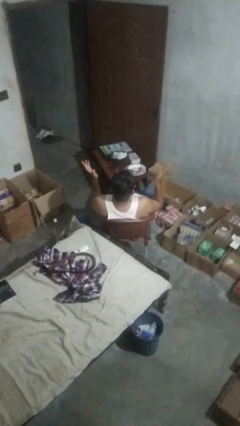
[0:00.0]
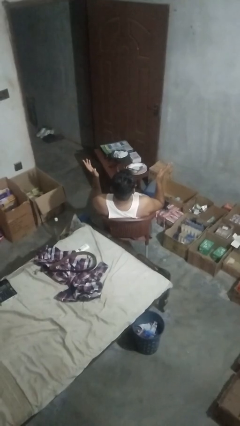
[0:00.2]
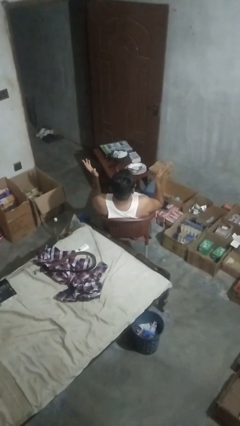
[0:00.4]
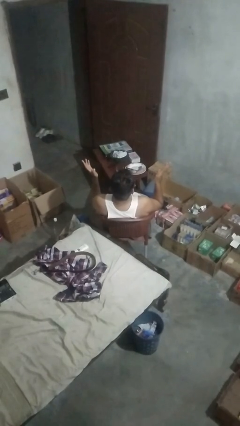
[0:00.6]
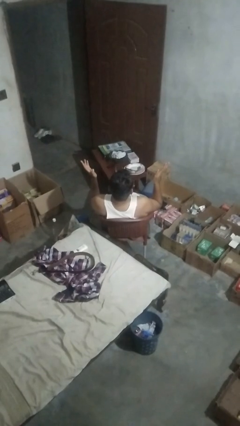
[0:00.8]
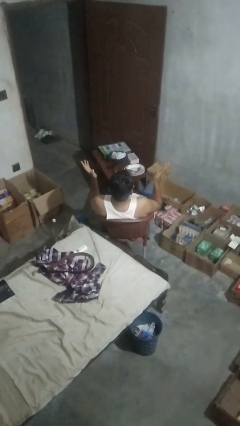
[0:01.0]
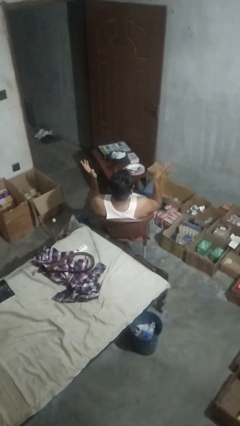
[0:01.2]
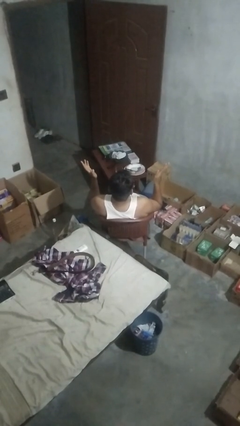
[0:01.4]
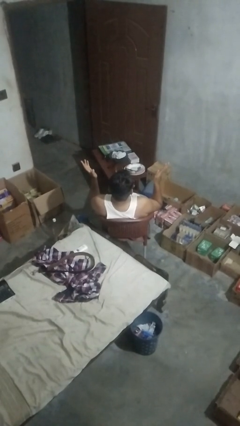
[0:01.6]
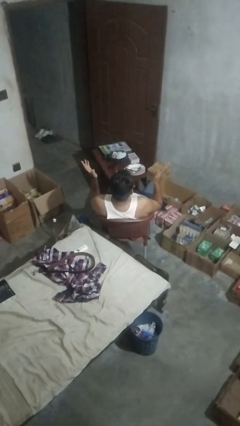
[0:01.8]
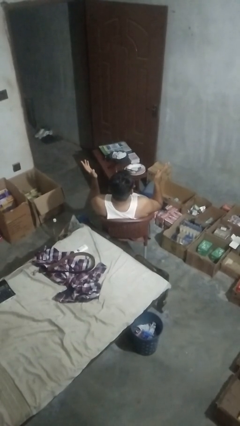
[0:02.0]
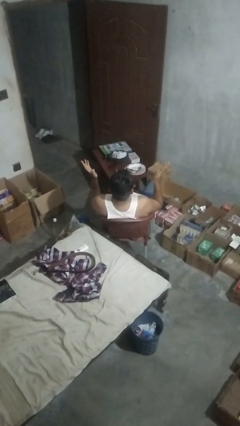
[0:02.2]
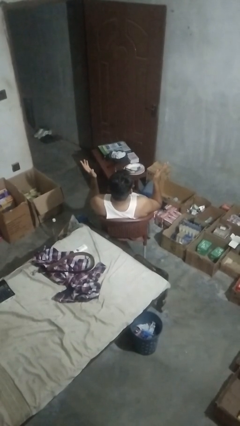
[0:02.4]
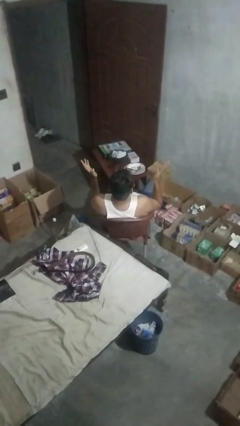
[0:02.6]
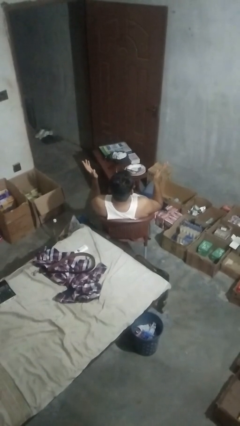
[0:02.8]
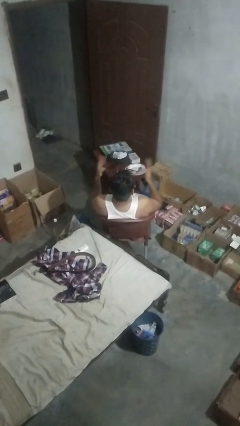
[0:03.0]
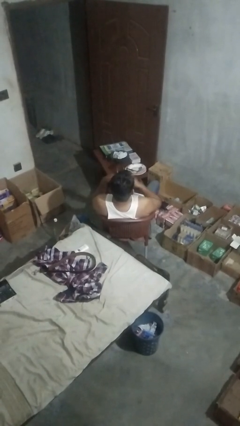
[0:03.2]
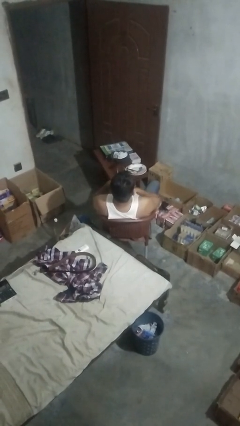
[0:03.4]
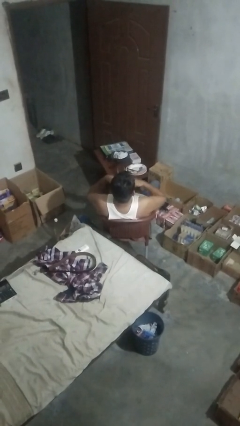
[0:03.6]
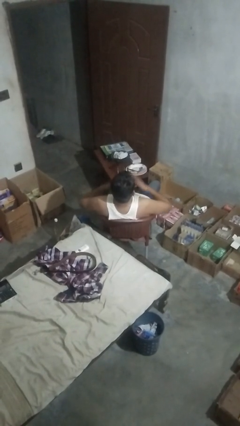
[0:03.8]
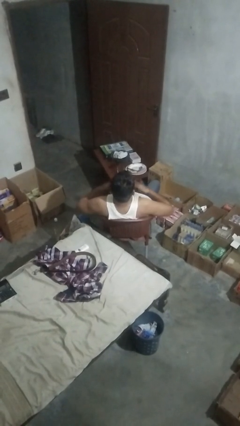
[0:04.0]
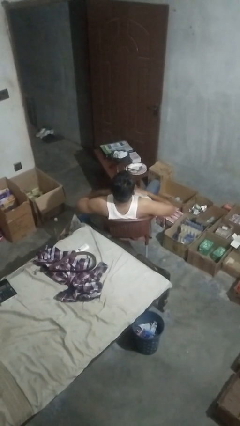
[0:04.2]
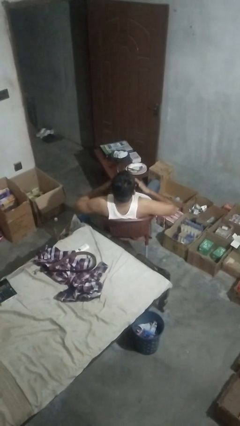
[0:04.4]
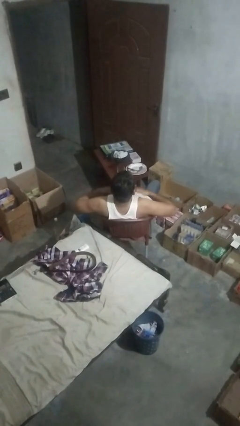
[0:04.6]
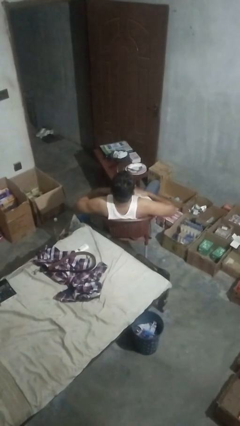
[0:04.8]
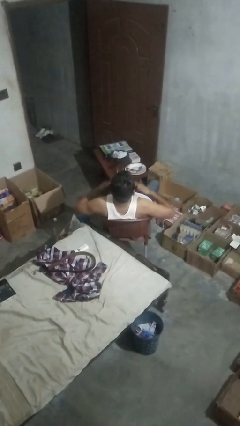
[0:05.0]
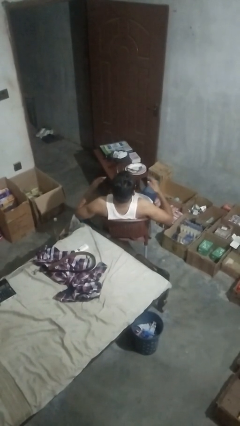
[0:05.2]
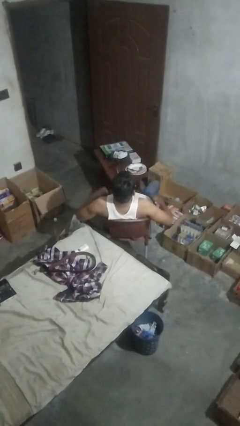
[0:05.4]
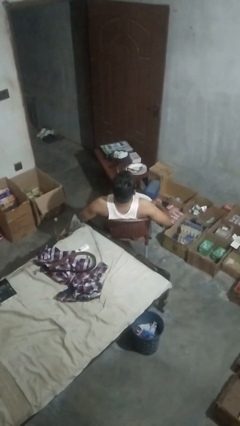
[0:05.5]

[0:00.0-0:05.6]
person drums on chest

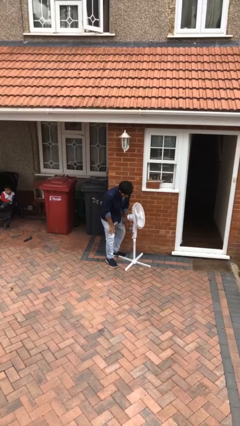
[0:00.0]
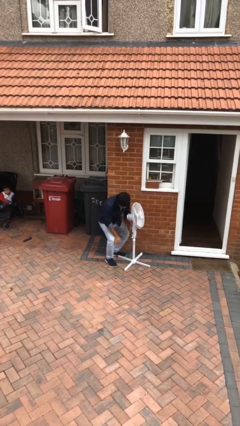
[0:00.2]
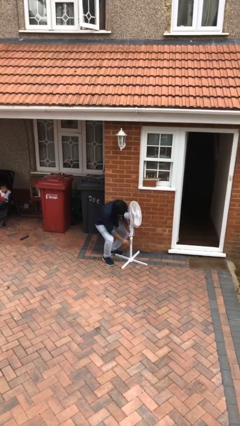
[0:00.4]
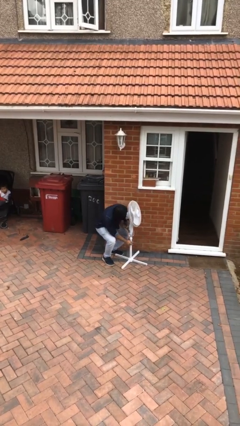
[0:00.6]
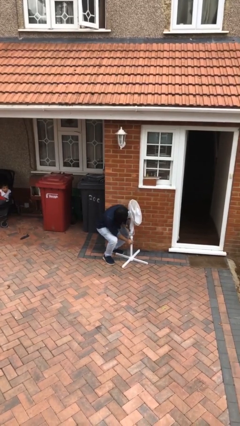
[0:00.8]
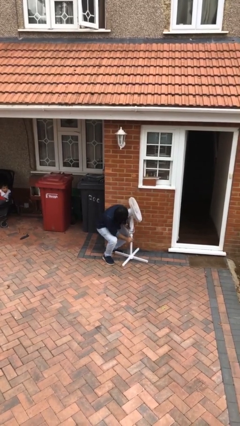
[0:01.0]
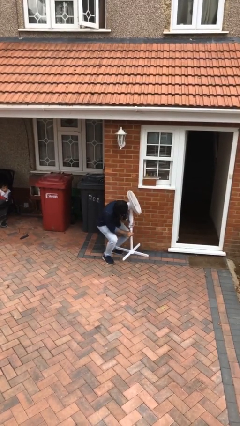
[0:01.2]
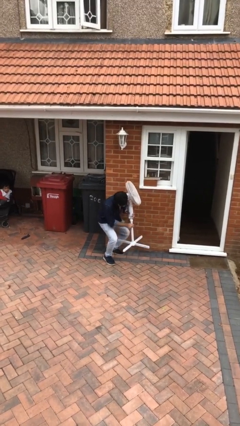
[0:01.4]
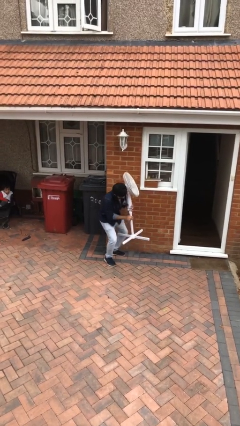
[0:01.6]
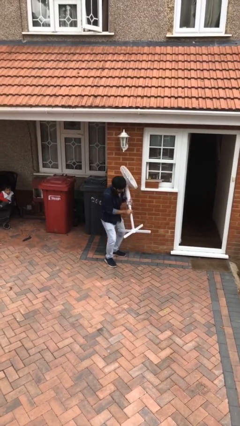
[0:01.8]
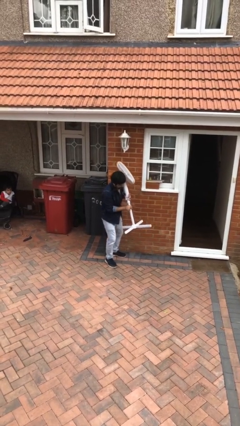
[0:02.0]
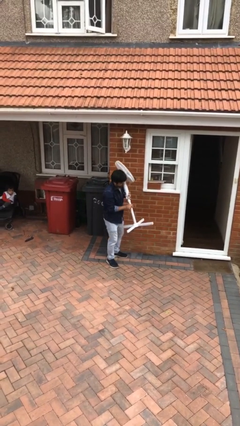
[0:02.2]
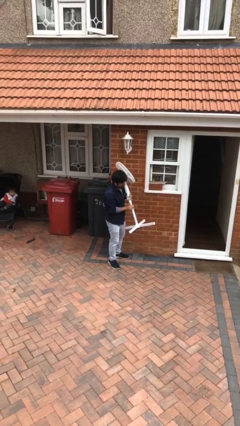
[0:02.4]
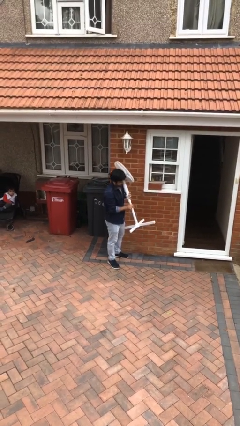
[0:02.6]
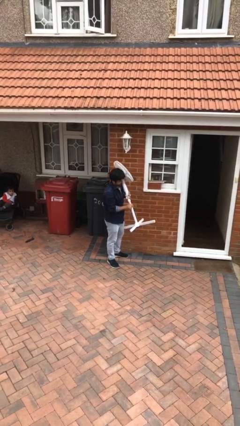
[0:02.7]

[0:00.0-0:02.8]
person picks up object from floor

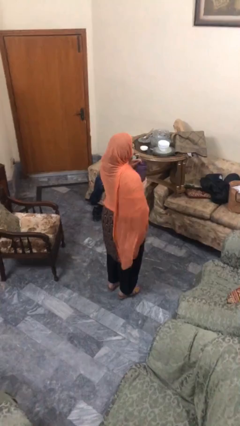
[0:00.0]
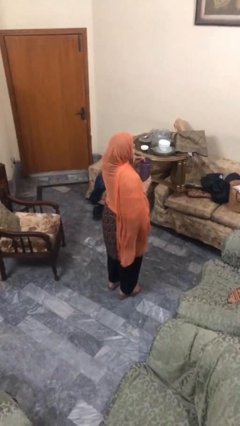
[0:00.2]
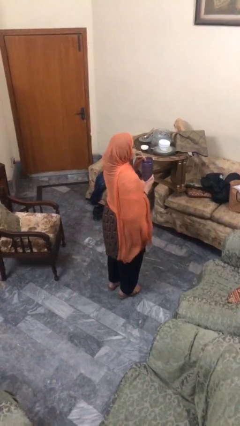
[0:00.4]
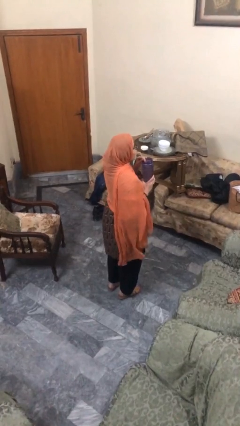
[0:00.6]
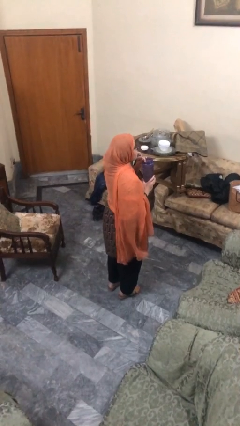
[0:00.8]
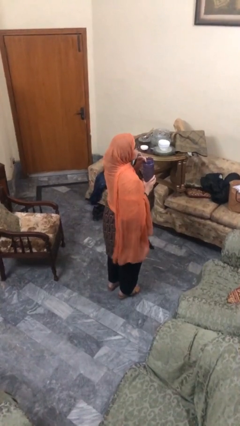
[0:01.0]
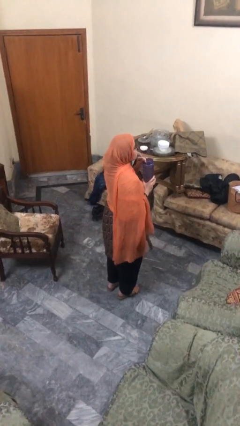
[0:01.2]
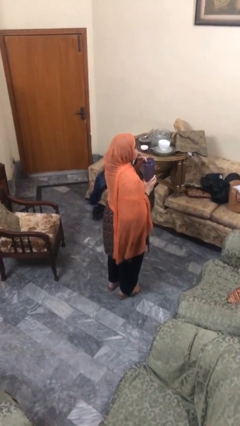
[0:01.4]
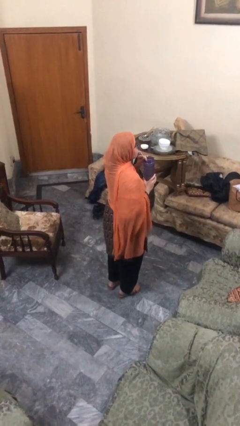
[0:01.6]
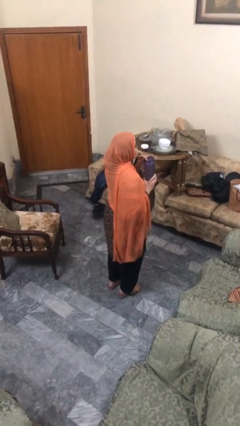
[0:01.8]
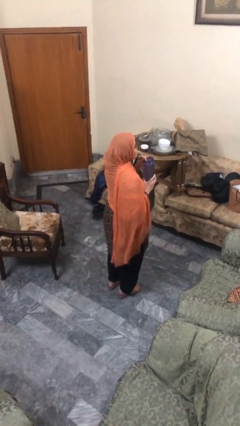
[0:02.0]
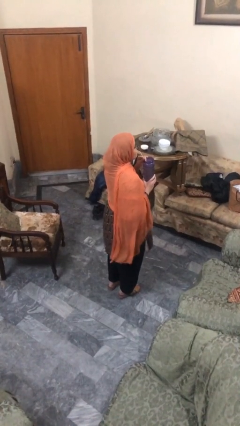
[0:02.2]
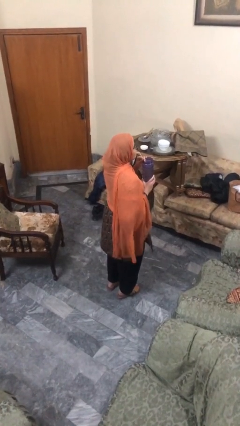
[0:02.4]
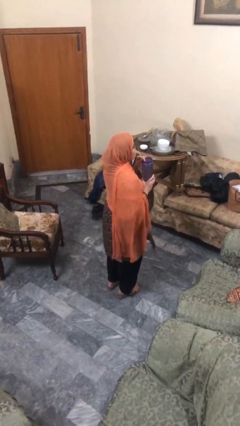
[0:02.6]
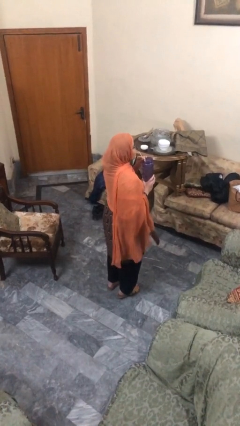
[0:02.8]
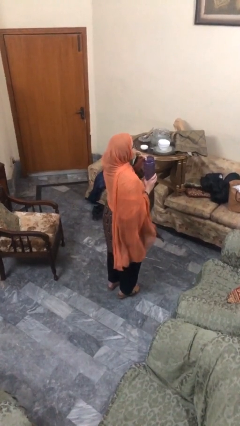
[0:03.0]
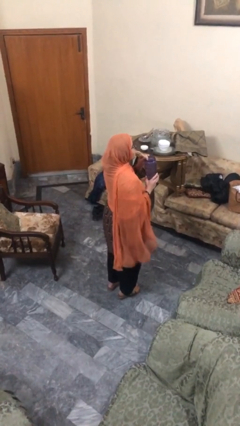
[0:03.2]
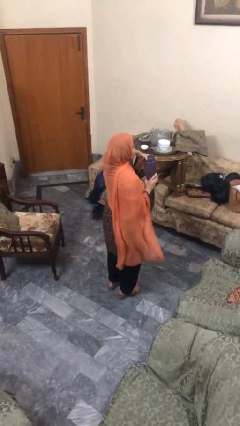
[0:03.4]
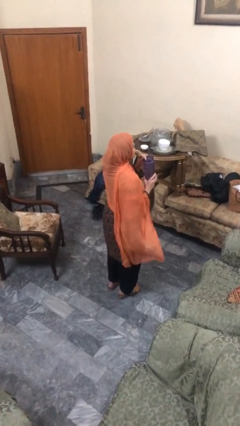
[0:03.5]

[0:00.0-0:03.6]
person drinks from straw

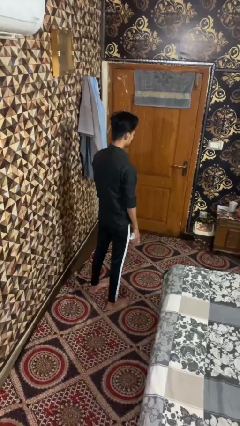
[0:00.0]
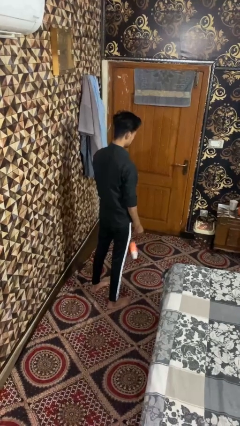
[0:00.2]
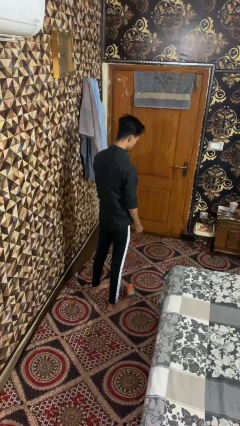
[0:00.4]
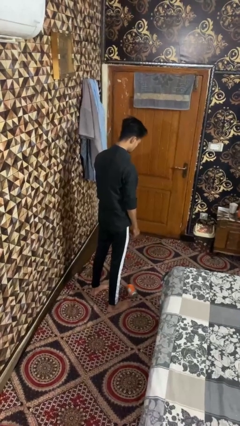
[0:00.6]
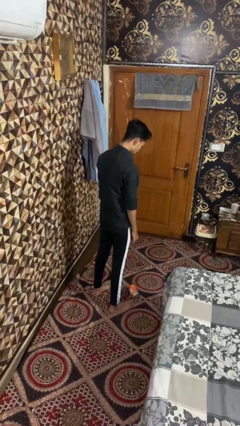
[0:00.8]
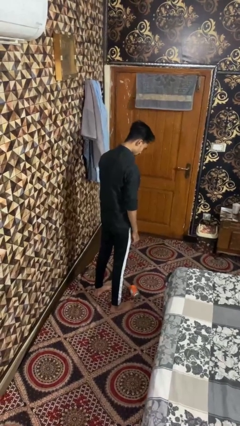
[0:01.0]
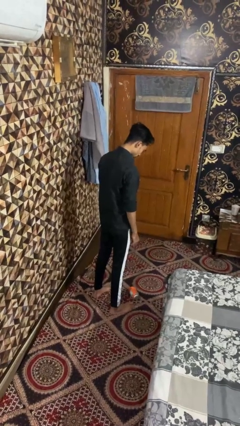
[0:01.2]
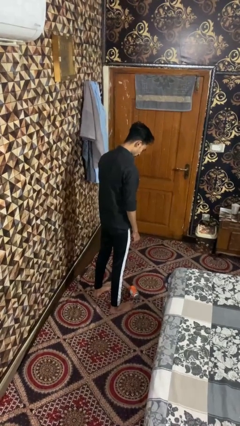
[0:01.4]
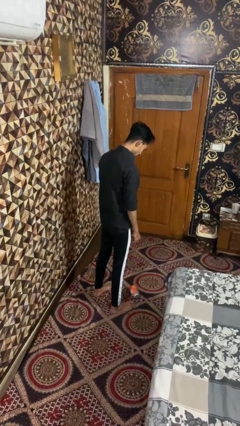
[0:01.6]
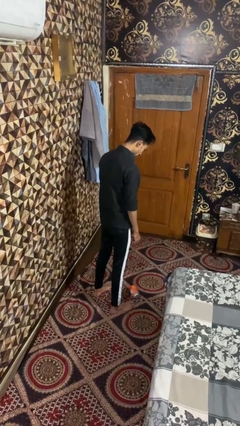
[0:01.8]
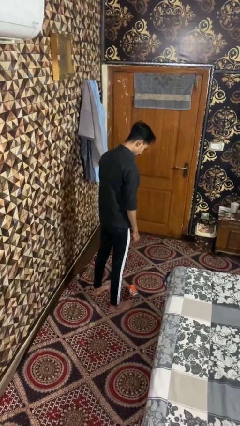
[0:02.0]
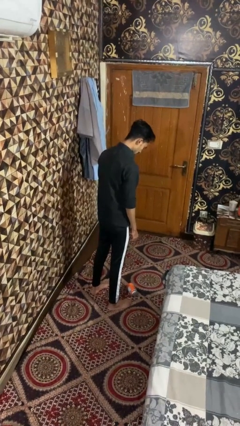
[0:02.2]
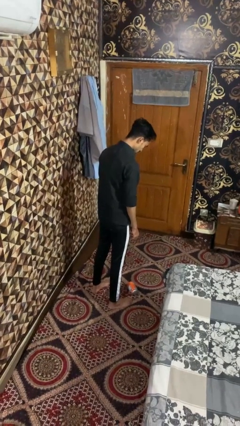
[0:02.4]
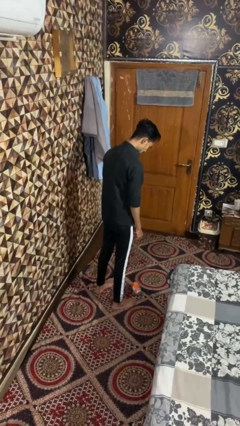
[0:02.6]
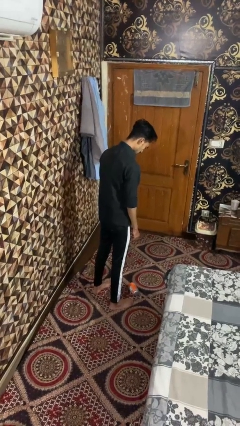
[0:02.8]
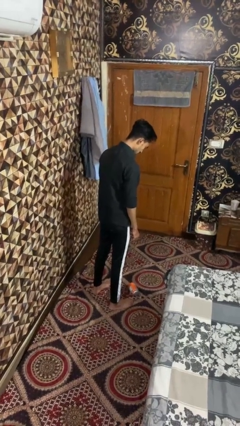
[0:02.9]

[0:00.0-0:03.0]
person trips on object on floor

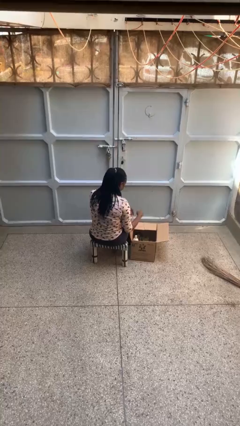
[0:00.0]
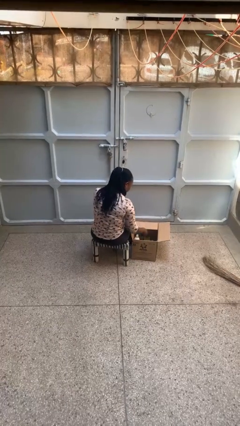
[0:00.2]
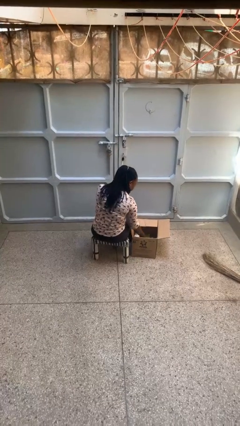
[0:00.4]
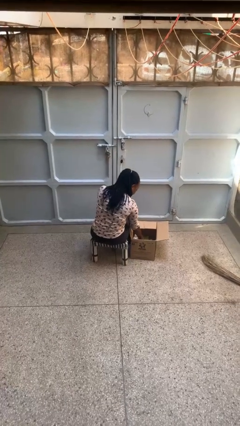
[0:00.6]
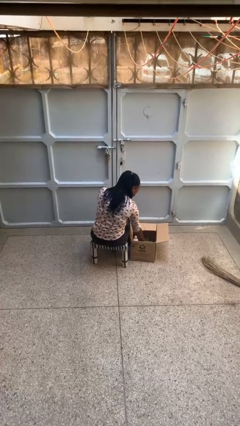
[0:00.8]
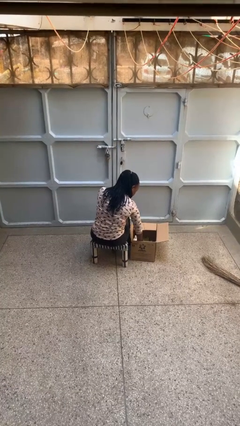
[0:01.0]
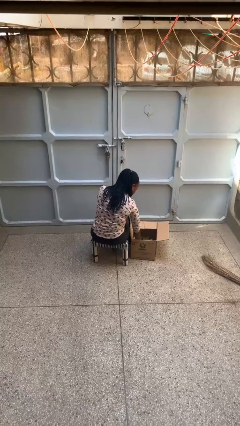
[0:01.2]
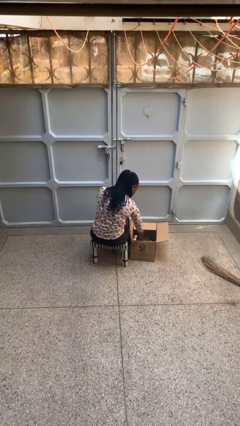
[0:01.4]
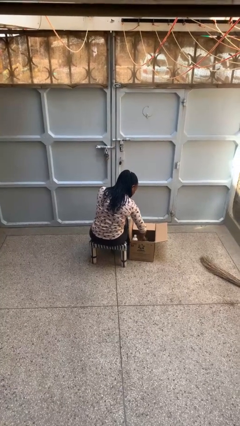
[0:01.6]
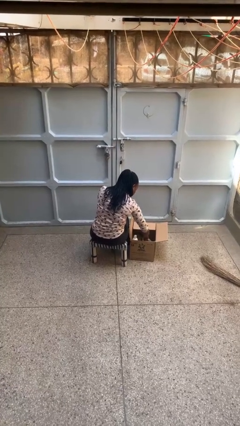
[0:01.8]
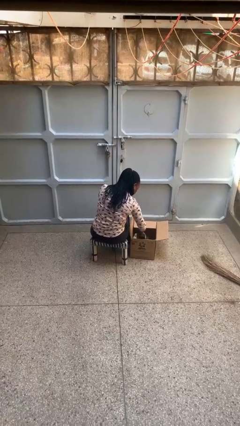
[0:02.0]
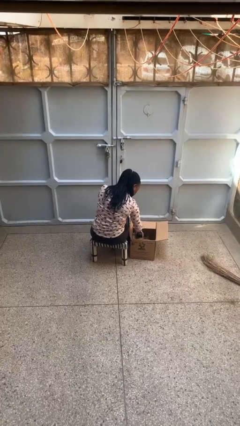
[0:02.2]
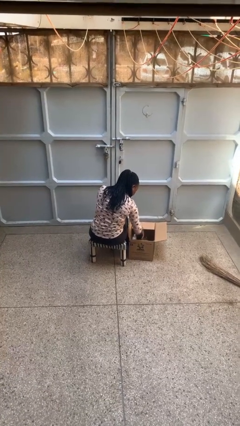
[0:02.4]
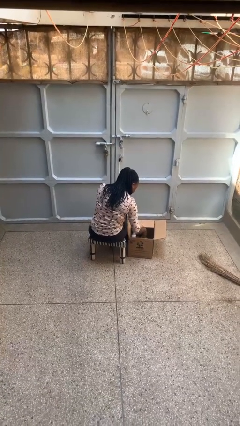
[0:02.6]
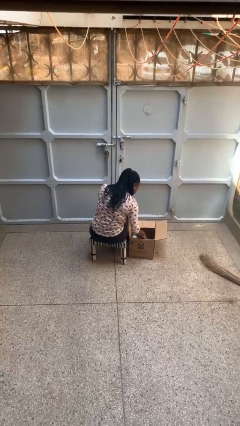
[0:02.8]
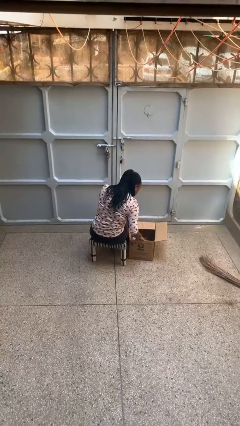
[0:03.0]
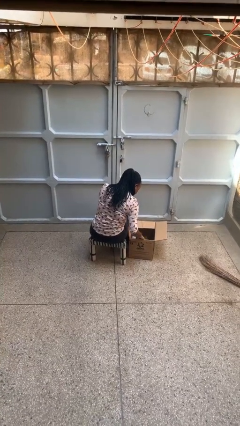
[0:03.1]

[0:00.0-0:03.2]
person searches in box
